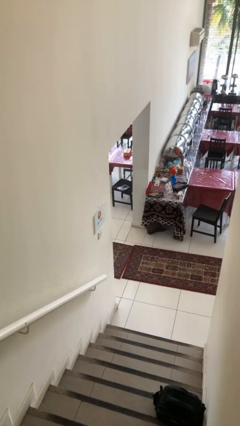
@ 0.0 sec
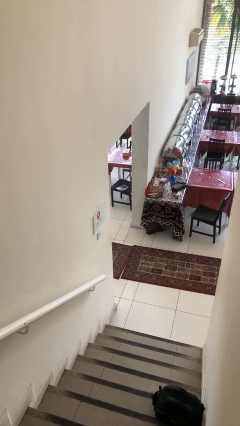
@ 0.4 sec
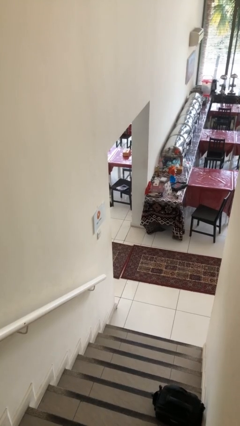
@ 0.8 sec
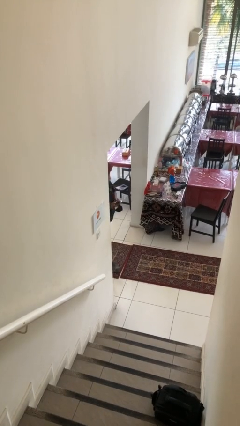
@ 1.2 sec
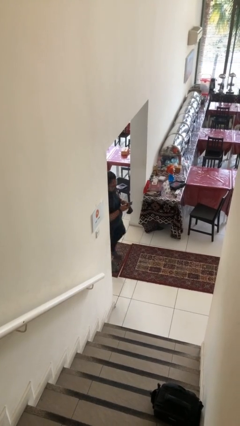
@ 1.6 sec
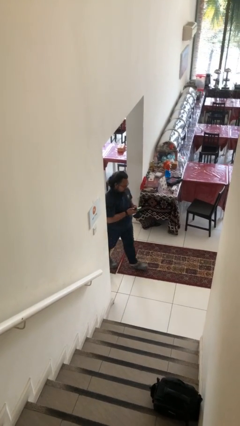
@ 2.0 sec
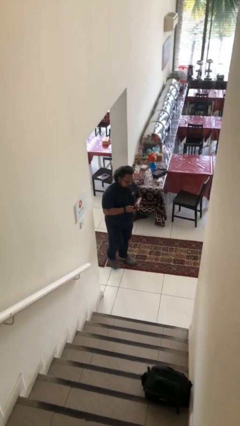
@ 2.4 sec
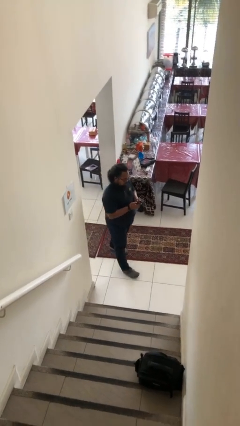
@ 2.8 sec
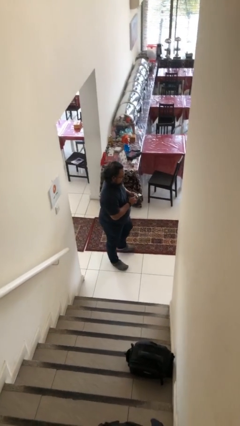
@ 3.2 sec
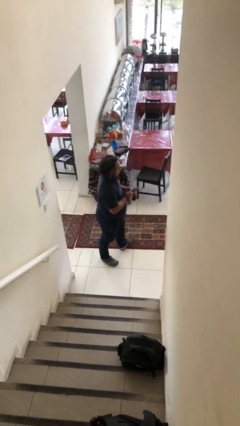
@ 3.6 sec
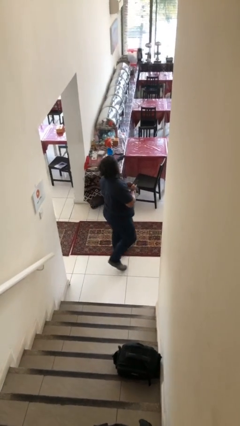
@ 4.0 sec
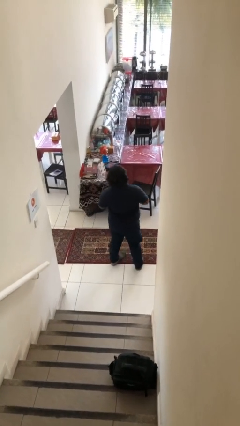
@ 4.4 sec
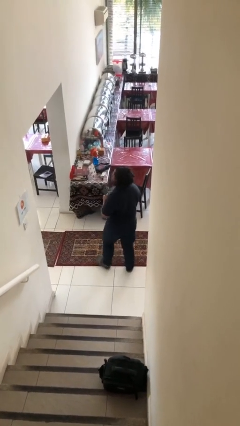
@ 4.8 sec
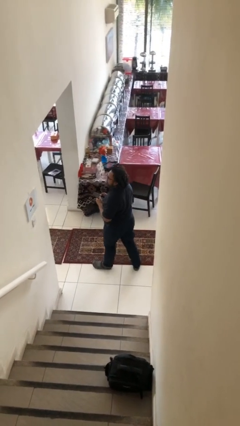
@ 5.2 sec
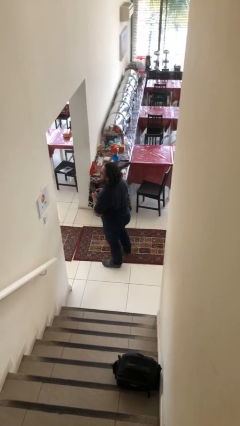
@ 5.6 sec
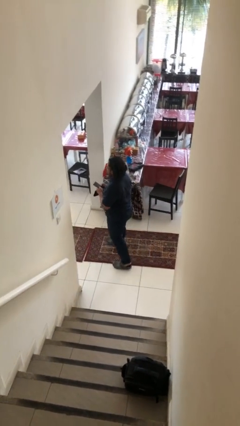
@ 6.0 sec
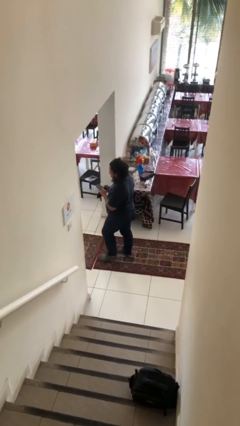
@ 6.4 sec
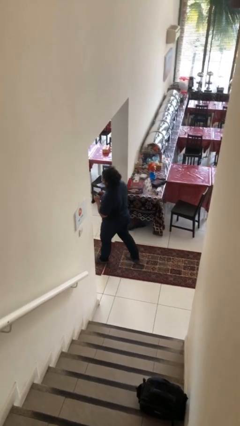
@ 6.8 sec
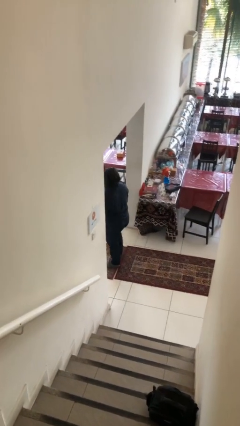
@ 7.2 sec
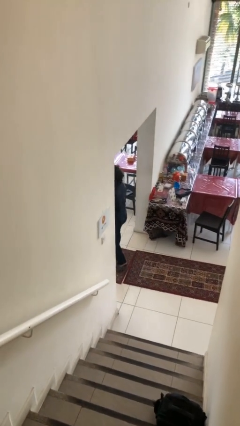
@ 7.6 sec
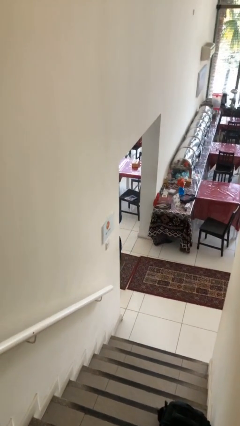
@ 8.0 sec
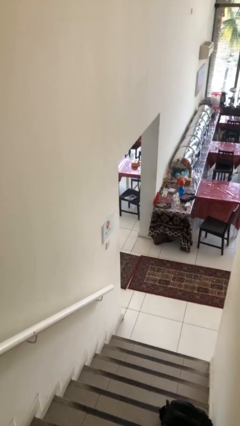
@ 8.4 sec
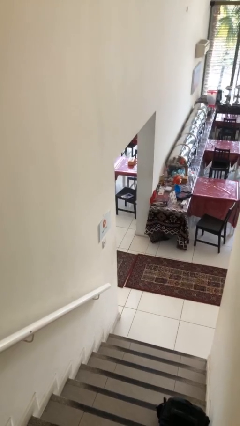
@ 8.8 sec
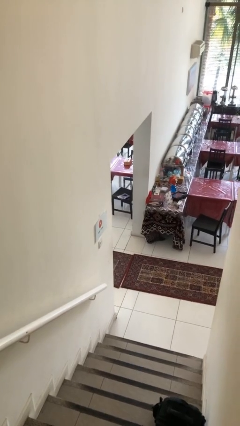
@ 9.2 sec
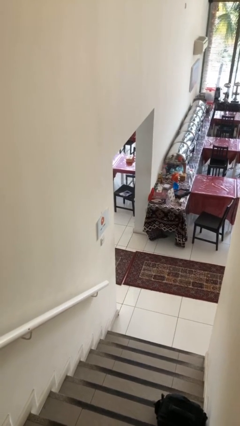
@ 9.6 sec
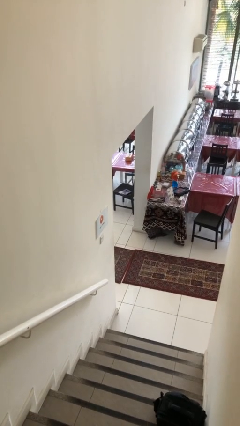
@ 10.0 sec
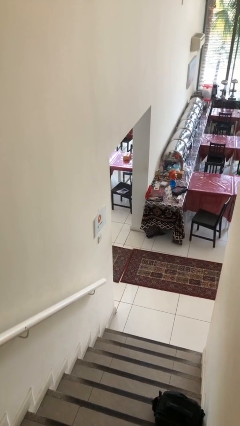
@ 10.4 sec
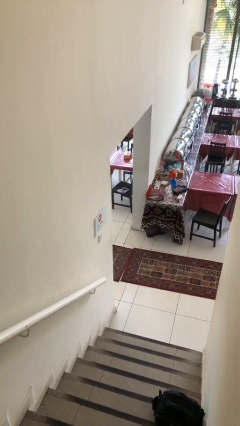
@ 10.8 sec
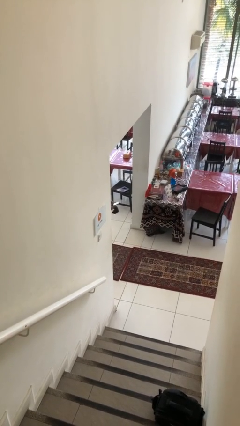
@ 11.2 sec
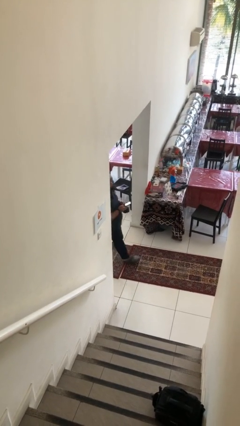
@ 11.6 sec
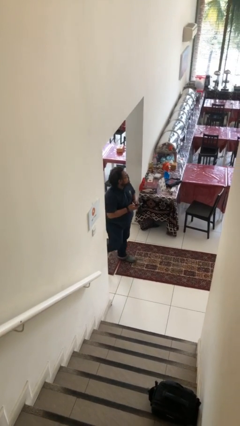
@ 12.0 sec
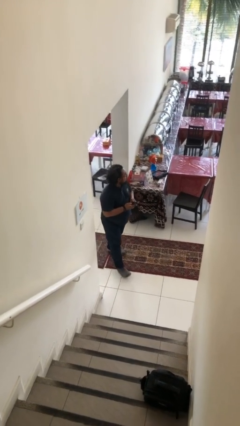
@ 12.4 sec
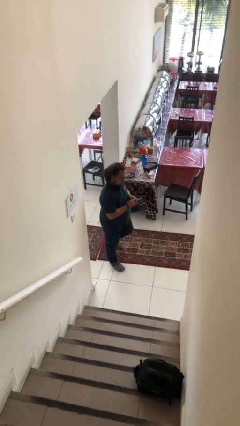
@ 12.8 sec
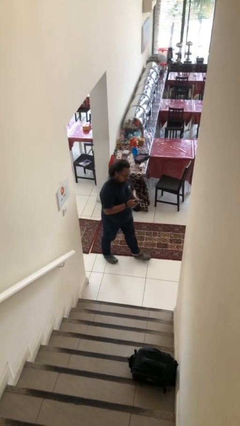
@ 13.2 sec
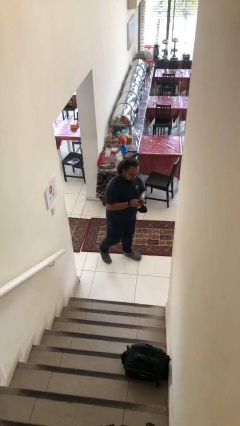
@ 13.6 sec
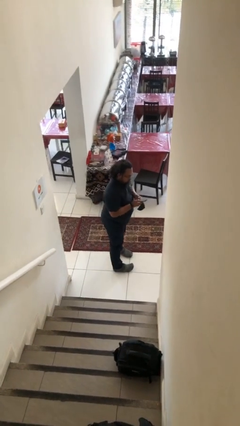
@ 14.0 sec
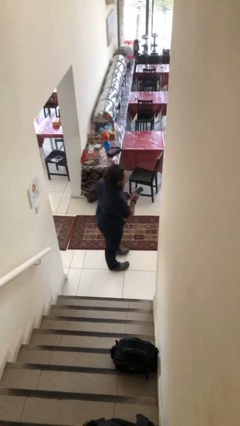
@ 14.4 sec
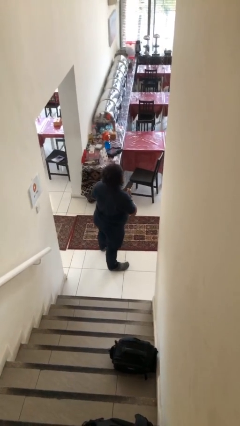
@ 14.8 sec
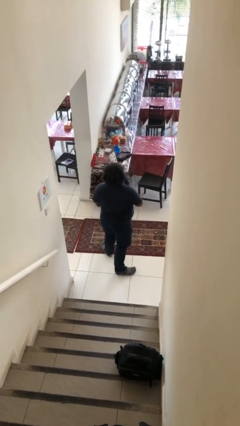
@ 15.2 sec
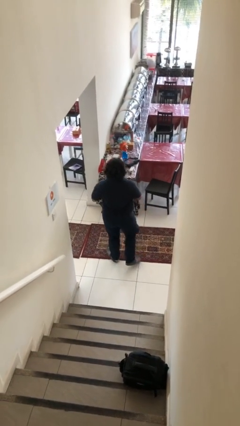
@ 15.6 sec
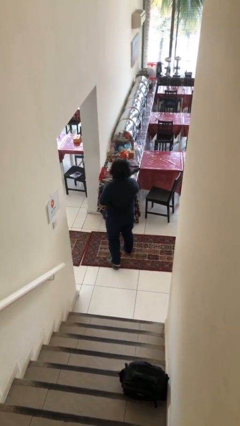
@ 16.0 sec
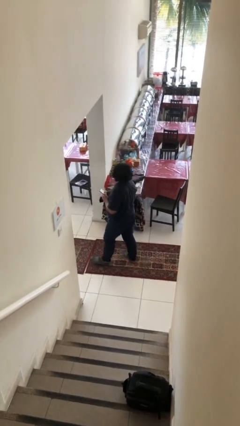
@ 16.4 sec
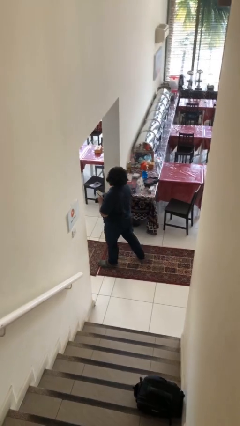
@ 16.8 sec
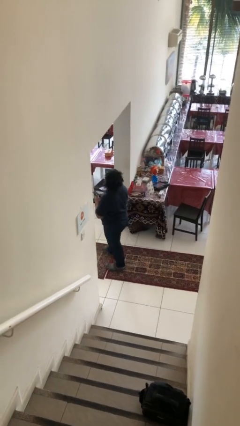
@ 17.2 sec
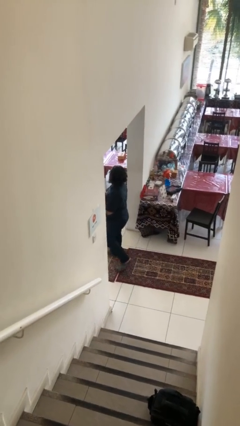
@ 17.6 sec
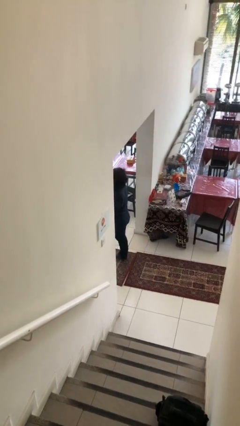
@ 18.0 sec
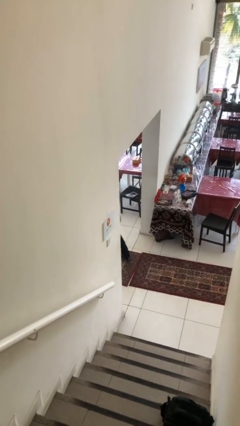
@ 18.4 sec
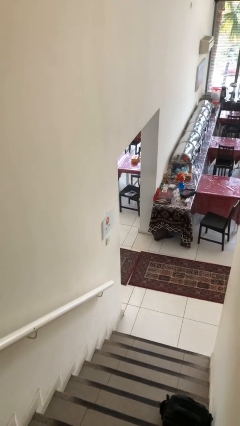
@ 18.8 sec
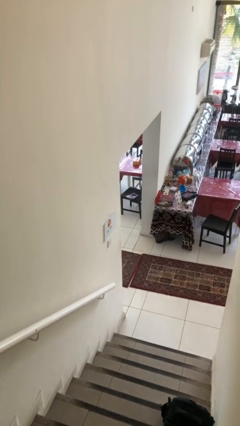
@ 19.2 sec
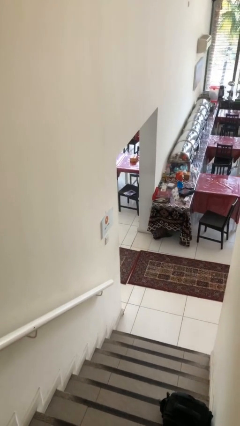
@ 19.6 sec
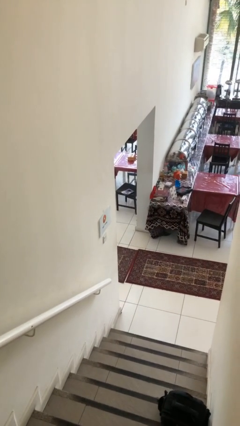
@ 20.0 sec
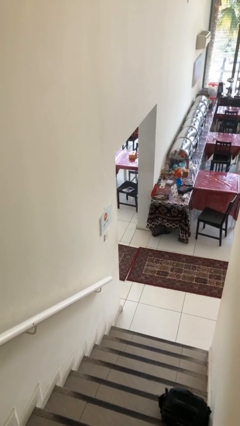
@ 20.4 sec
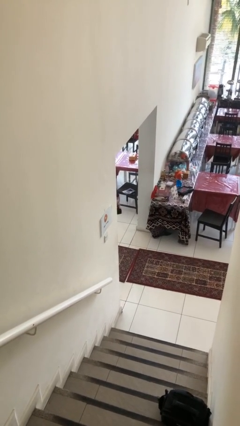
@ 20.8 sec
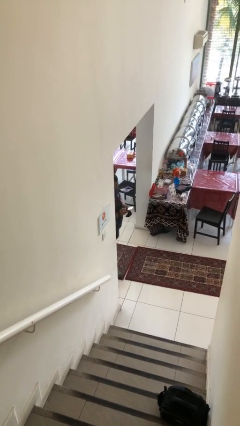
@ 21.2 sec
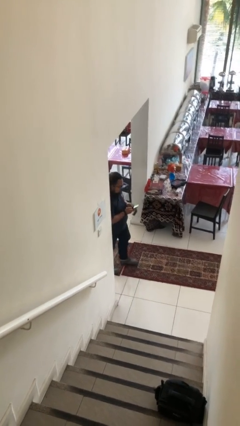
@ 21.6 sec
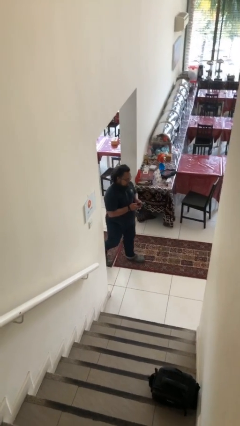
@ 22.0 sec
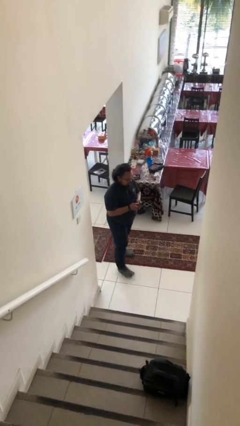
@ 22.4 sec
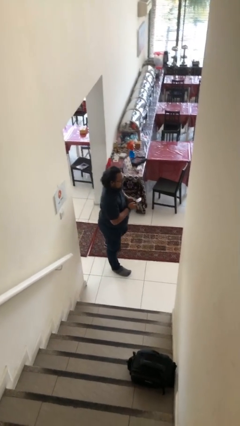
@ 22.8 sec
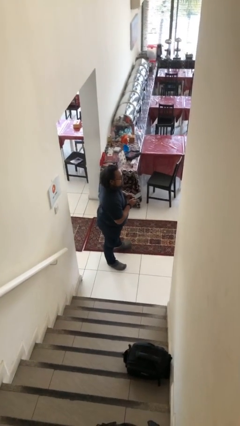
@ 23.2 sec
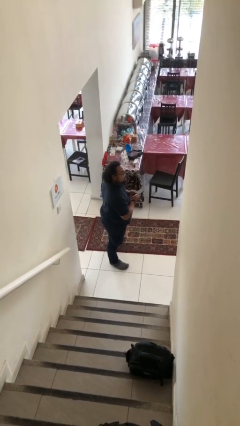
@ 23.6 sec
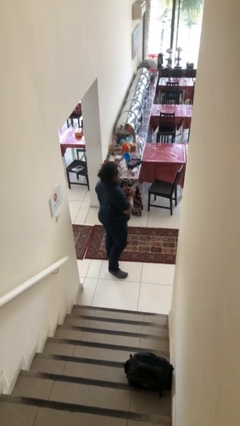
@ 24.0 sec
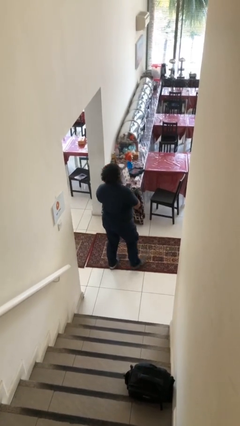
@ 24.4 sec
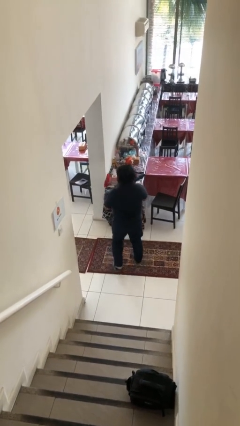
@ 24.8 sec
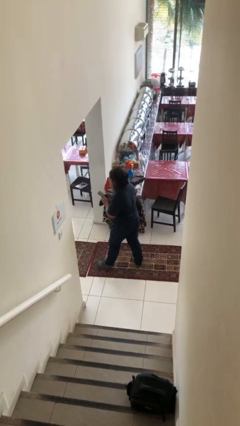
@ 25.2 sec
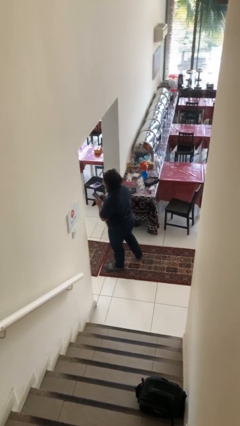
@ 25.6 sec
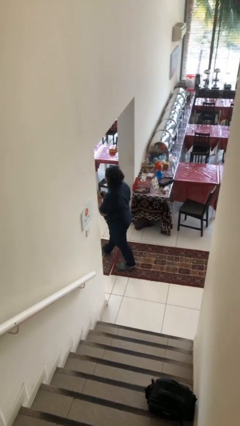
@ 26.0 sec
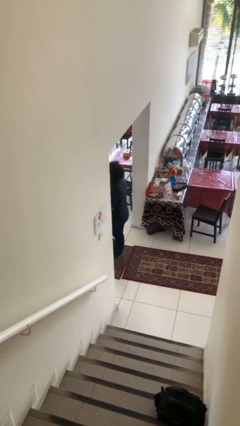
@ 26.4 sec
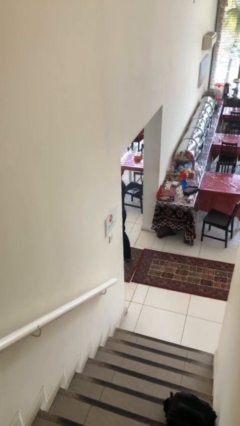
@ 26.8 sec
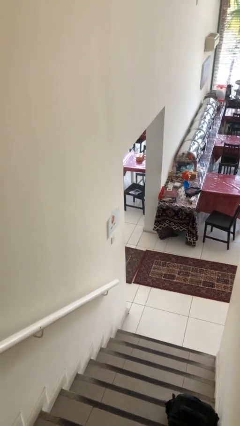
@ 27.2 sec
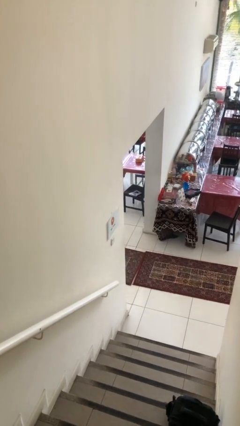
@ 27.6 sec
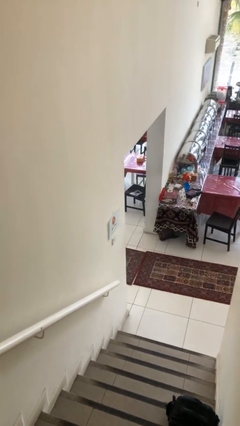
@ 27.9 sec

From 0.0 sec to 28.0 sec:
person texts on phone

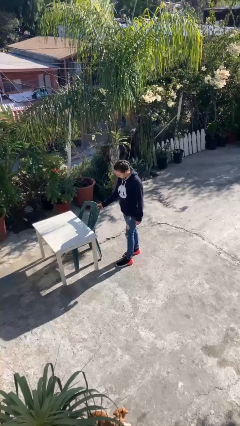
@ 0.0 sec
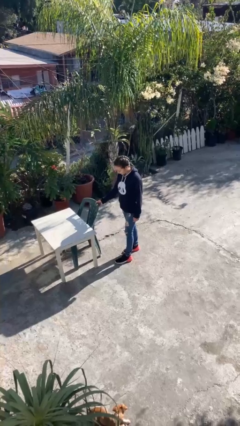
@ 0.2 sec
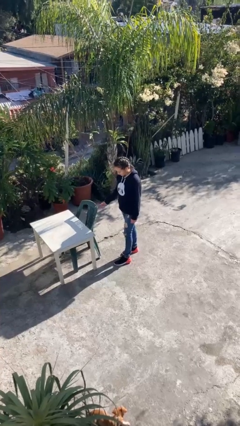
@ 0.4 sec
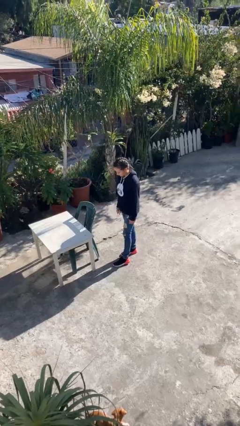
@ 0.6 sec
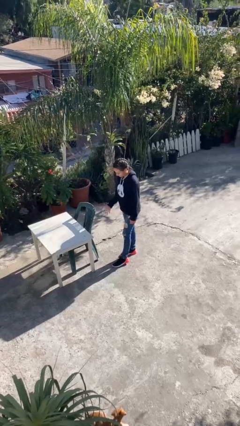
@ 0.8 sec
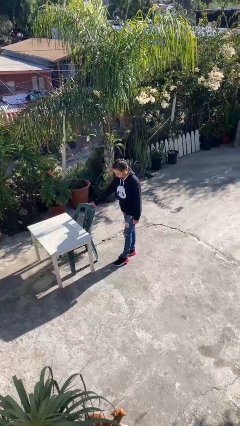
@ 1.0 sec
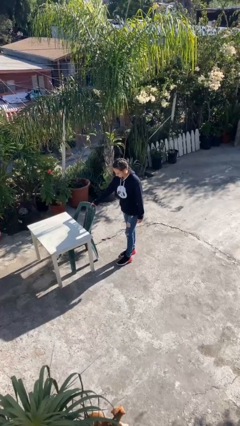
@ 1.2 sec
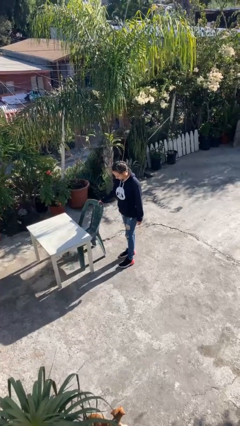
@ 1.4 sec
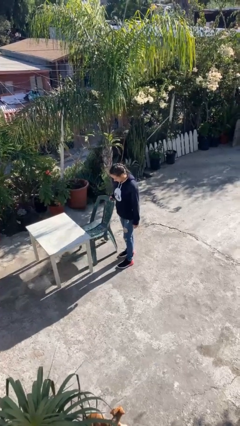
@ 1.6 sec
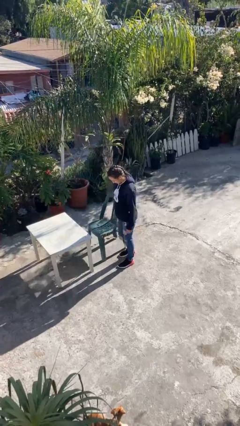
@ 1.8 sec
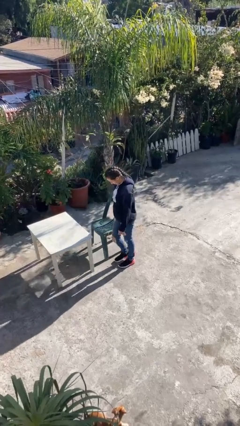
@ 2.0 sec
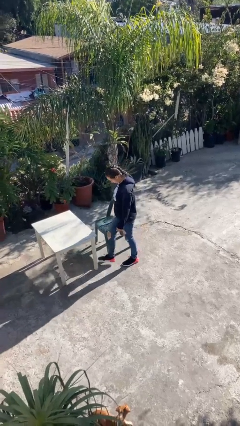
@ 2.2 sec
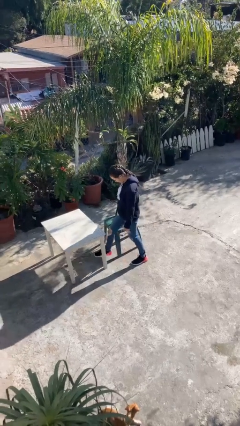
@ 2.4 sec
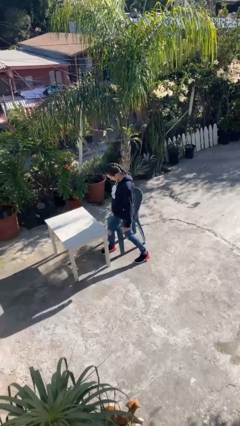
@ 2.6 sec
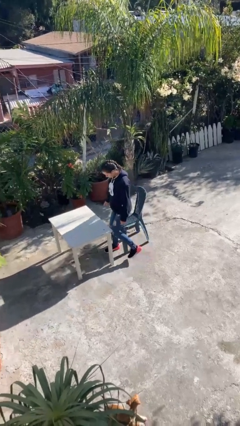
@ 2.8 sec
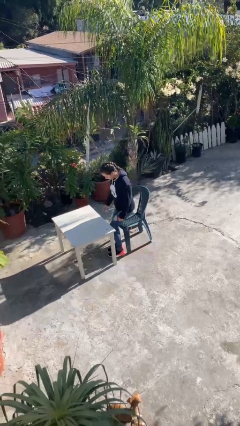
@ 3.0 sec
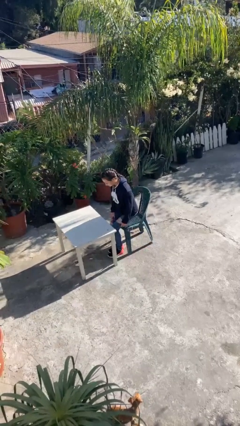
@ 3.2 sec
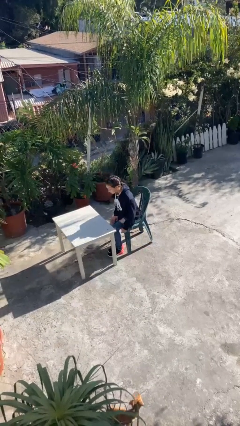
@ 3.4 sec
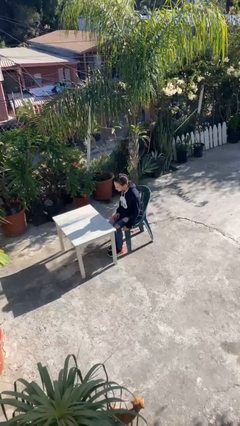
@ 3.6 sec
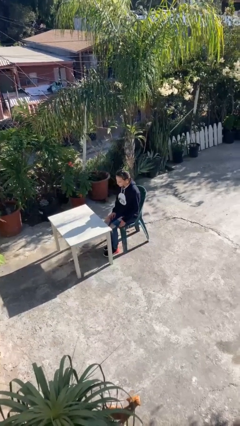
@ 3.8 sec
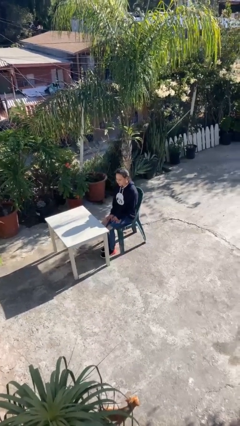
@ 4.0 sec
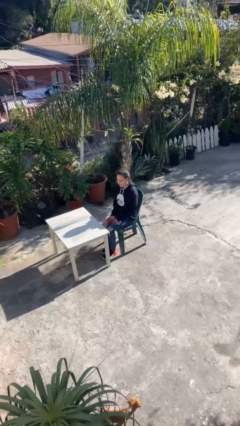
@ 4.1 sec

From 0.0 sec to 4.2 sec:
person sits down
